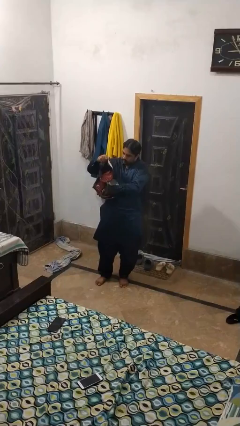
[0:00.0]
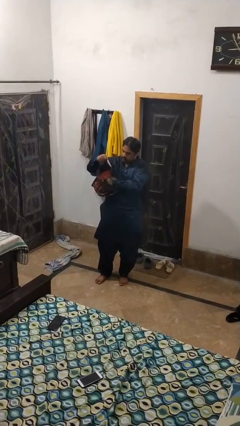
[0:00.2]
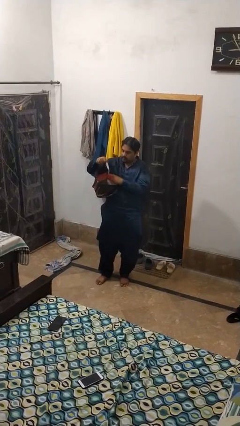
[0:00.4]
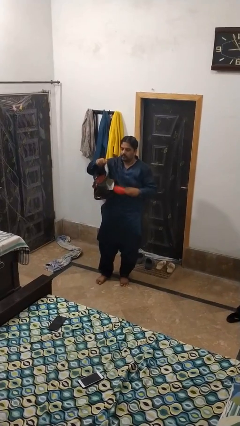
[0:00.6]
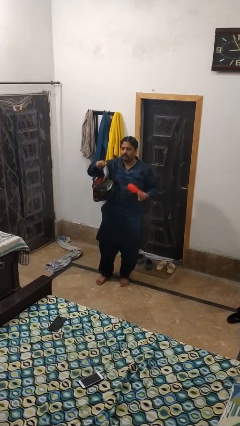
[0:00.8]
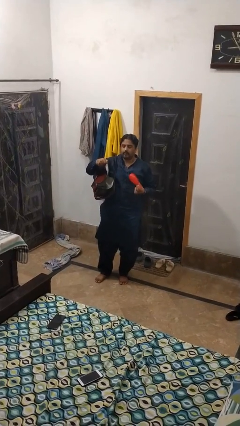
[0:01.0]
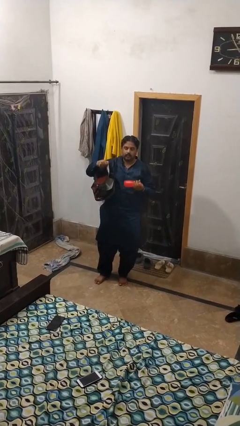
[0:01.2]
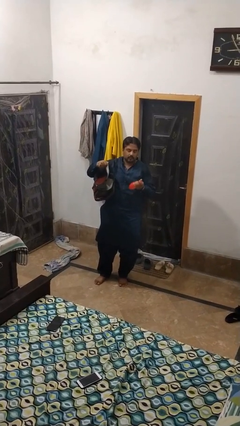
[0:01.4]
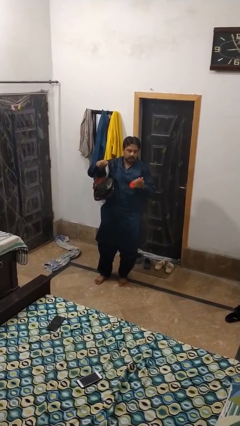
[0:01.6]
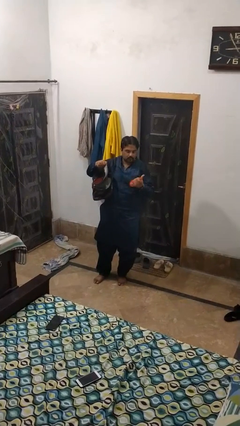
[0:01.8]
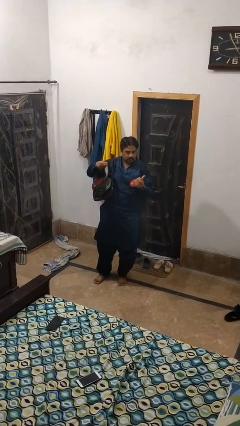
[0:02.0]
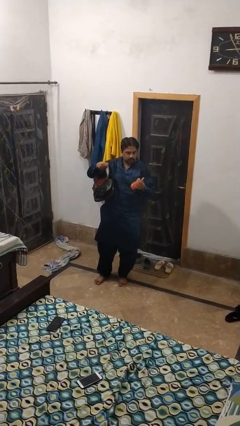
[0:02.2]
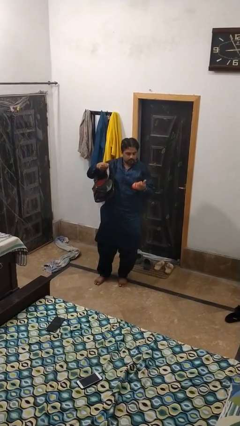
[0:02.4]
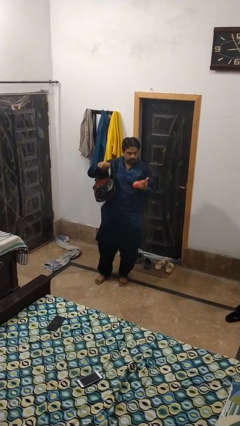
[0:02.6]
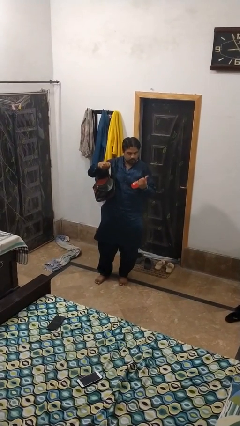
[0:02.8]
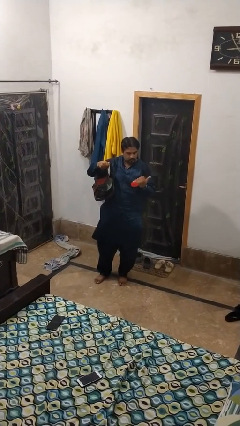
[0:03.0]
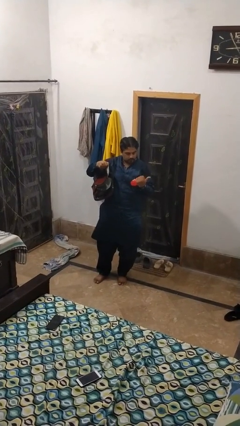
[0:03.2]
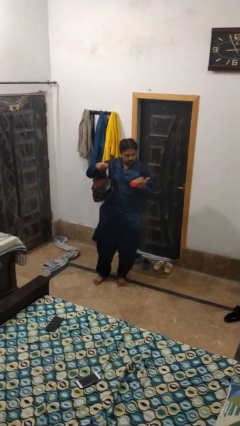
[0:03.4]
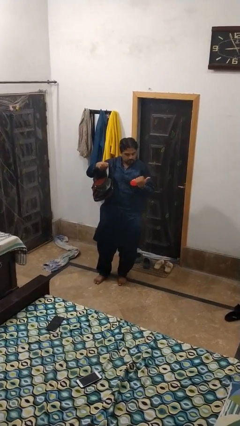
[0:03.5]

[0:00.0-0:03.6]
person takes object from purse

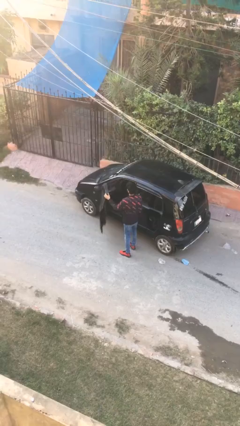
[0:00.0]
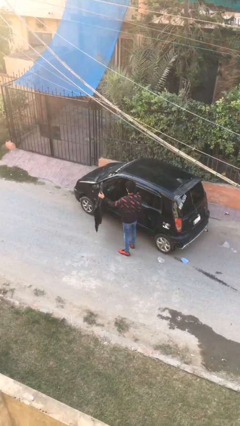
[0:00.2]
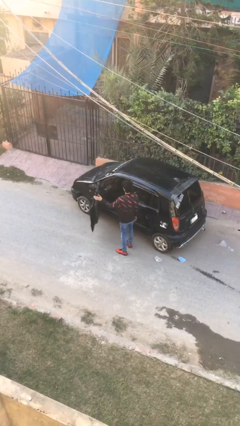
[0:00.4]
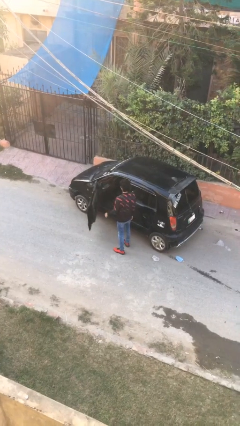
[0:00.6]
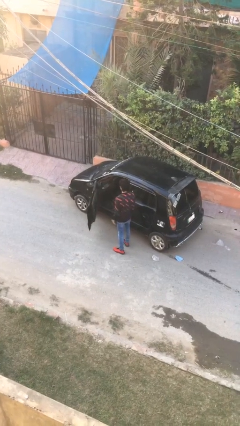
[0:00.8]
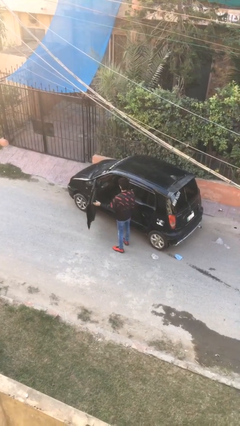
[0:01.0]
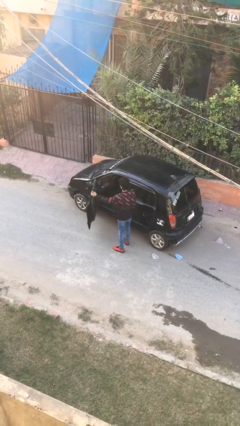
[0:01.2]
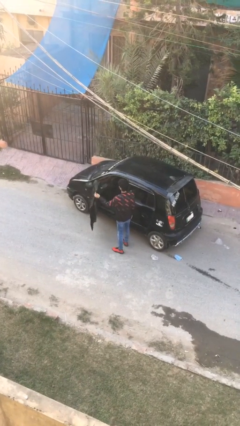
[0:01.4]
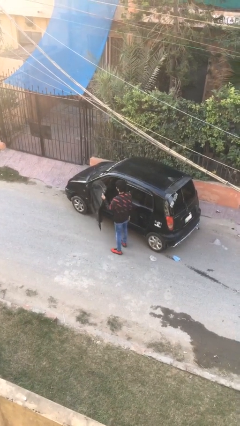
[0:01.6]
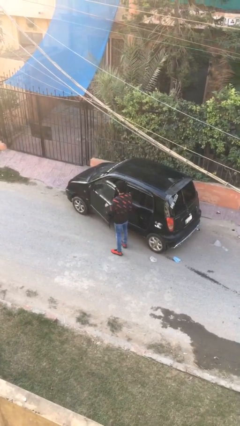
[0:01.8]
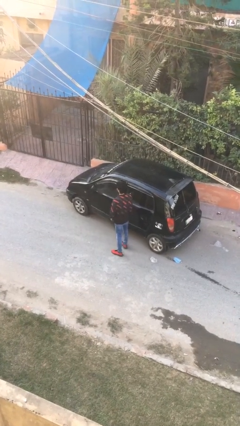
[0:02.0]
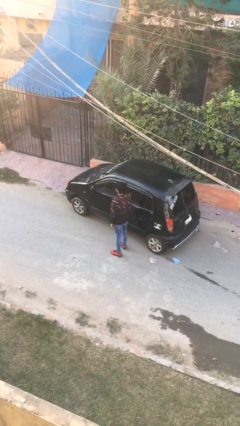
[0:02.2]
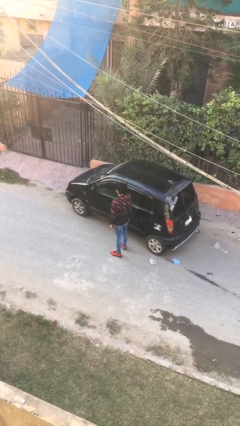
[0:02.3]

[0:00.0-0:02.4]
person closes car door

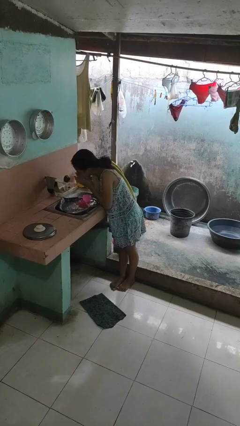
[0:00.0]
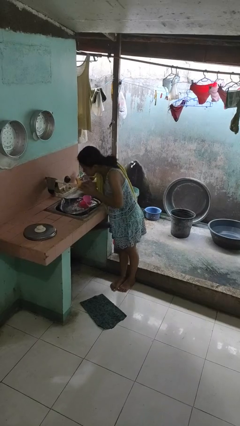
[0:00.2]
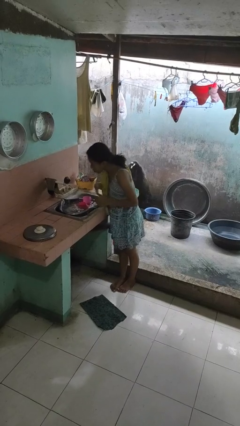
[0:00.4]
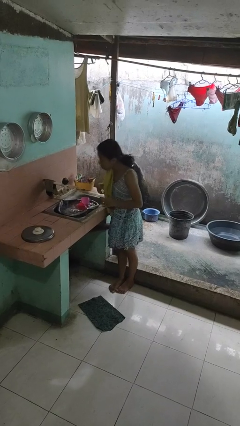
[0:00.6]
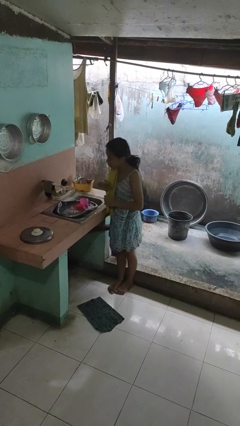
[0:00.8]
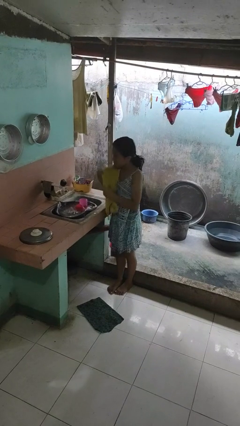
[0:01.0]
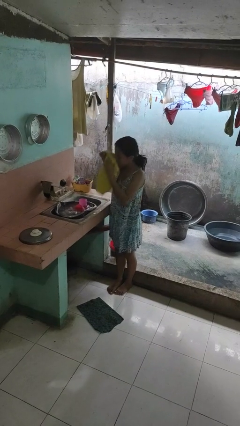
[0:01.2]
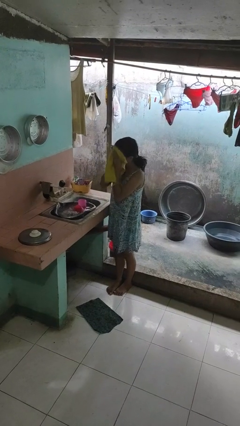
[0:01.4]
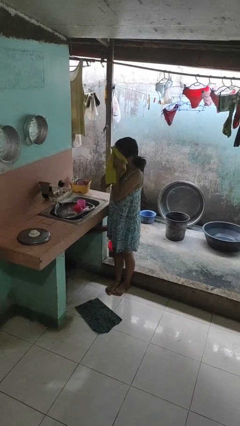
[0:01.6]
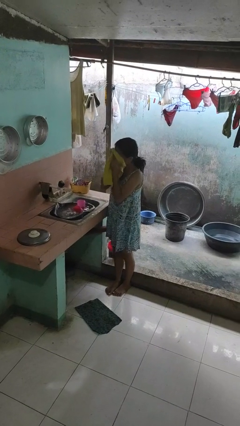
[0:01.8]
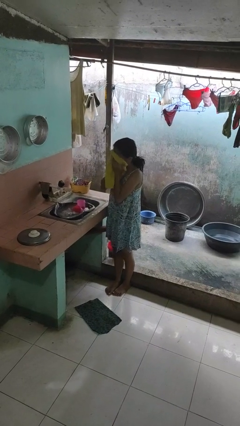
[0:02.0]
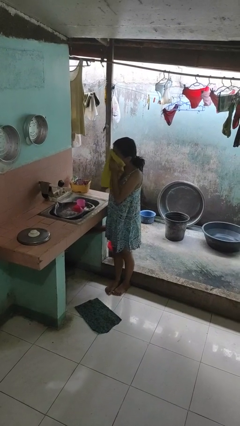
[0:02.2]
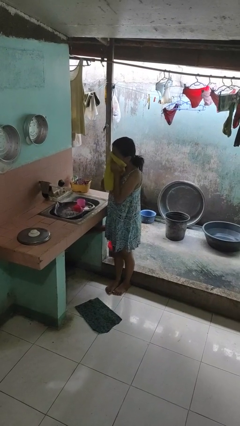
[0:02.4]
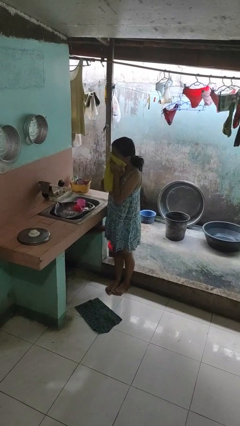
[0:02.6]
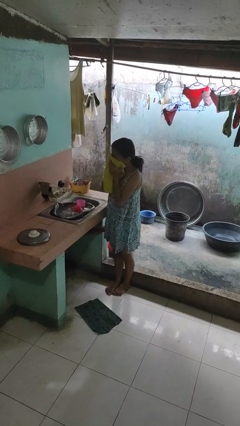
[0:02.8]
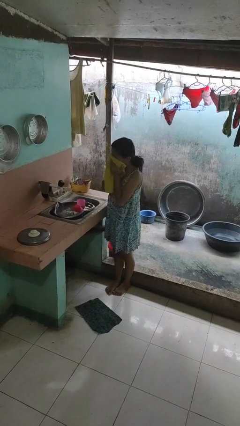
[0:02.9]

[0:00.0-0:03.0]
person dries face with towel

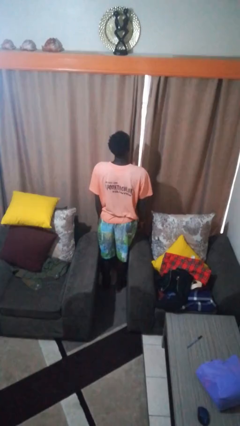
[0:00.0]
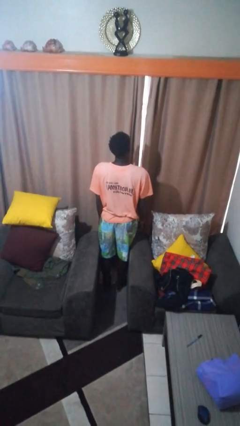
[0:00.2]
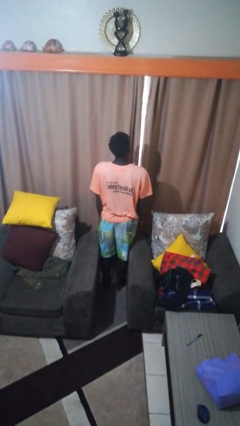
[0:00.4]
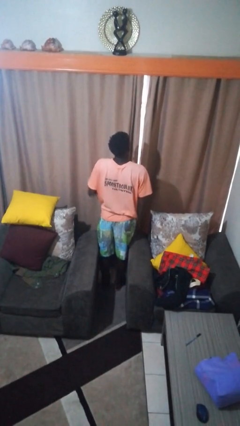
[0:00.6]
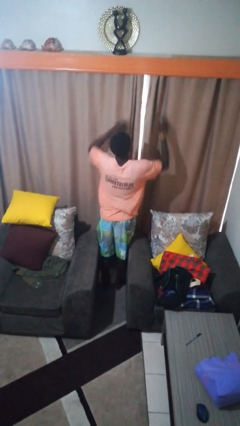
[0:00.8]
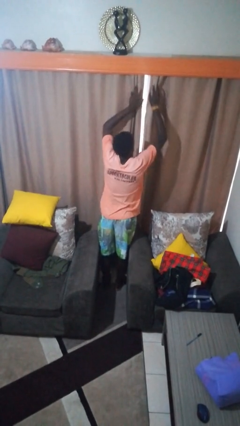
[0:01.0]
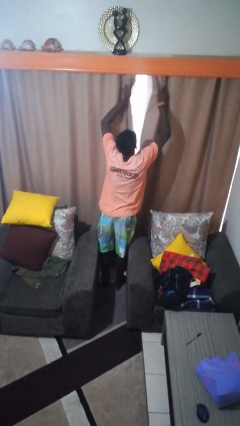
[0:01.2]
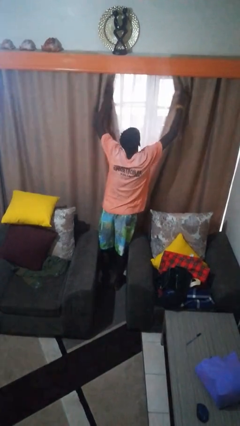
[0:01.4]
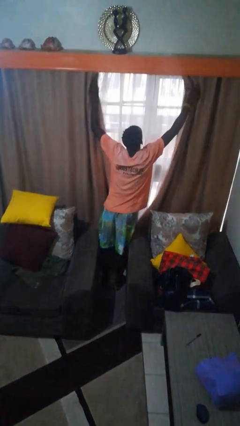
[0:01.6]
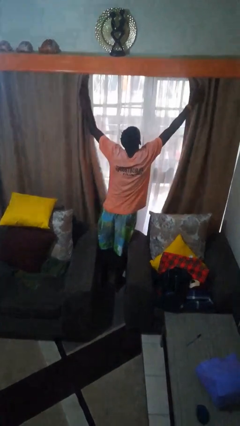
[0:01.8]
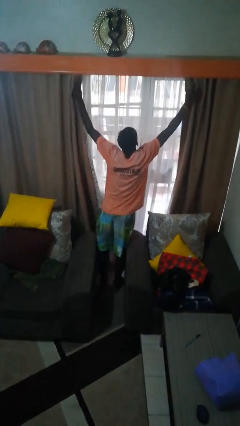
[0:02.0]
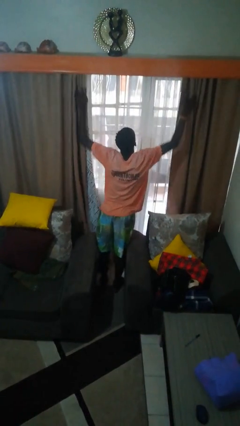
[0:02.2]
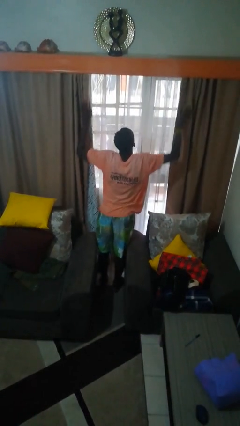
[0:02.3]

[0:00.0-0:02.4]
person opens curtains

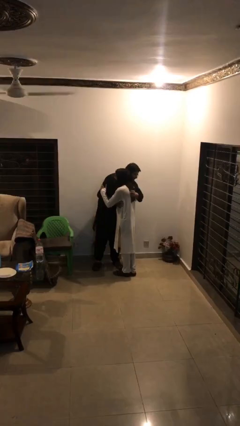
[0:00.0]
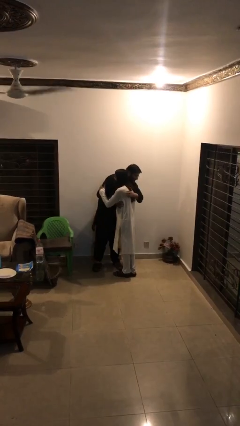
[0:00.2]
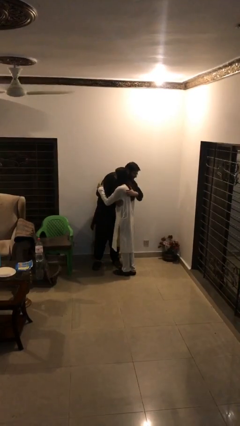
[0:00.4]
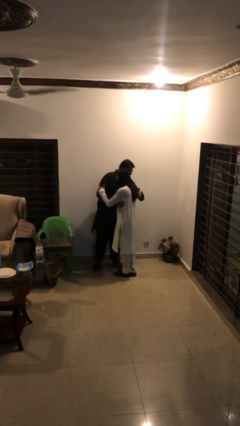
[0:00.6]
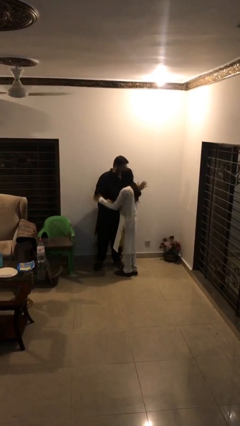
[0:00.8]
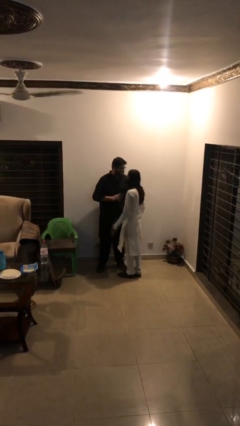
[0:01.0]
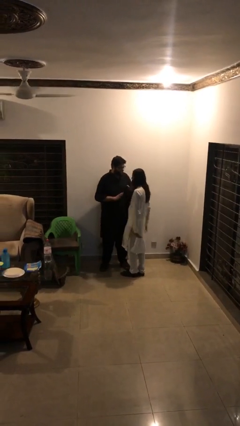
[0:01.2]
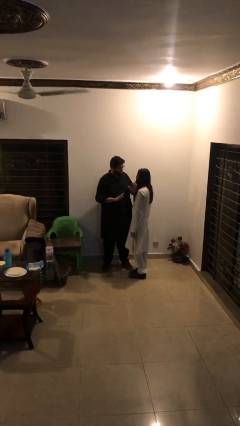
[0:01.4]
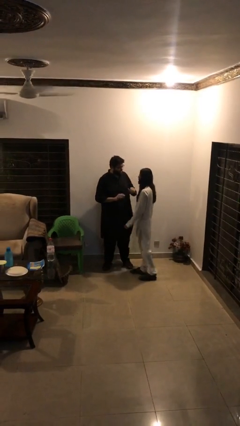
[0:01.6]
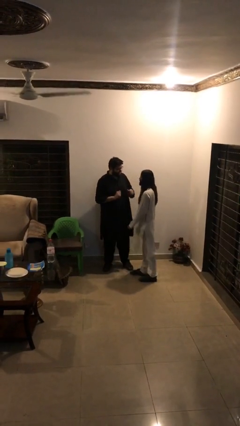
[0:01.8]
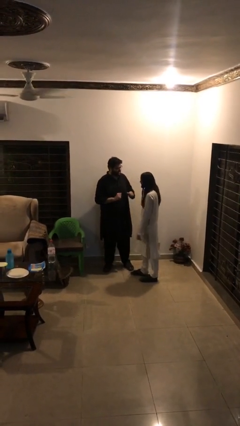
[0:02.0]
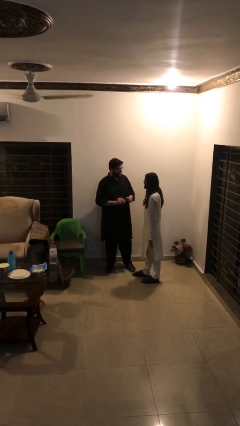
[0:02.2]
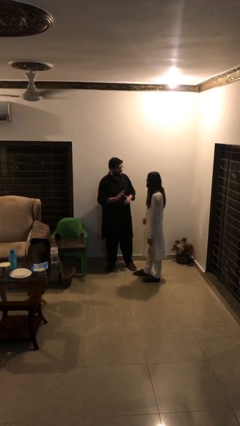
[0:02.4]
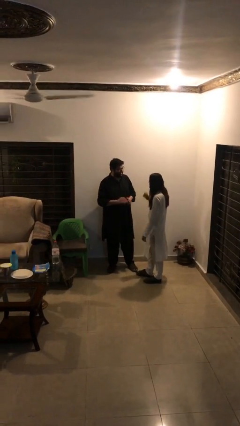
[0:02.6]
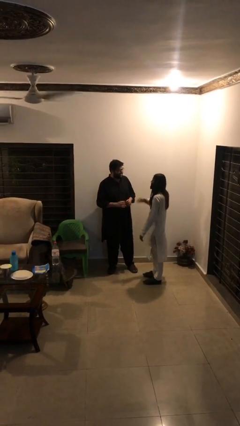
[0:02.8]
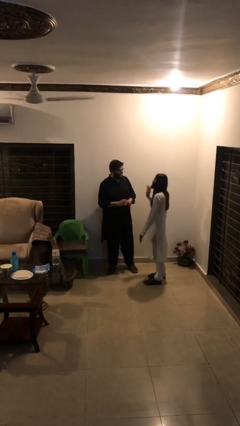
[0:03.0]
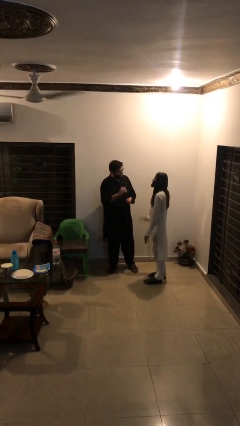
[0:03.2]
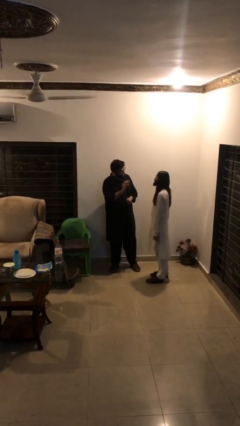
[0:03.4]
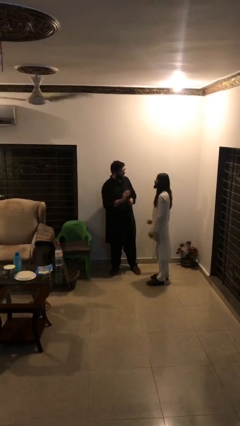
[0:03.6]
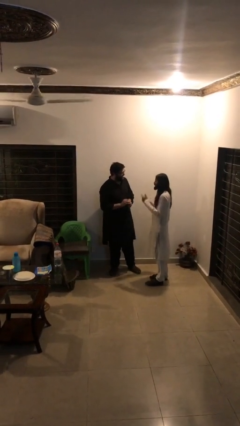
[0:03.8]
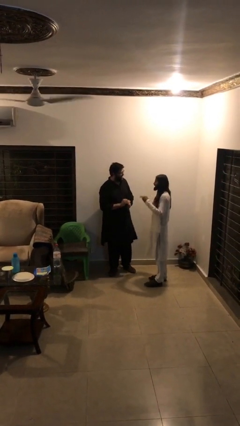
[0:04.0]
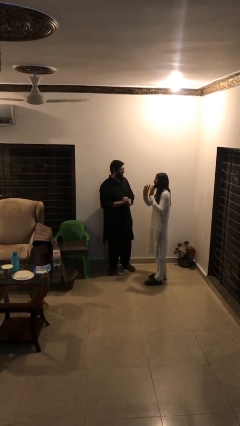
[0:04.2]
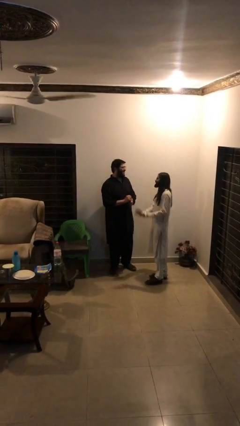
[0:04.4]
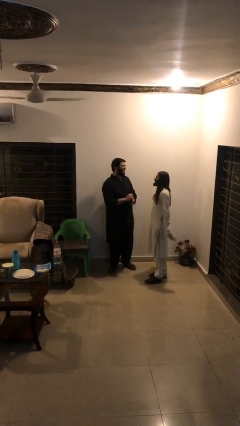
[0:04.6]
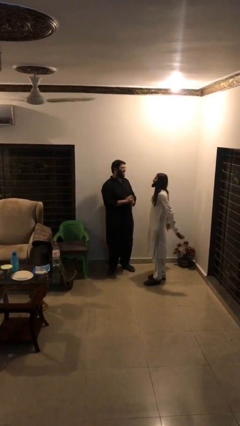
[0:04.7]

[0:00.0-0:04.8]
person talks to person

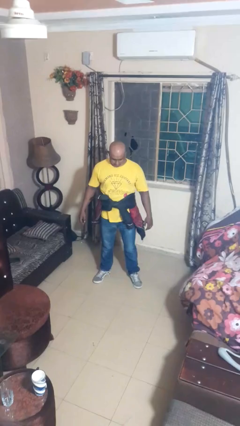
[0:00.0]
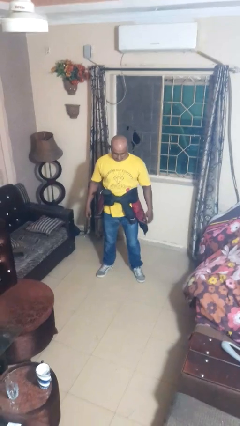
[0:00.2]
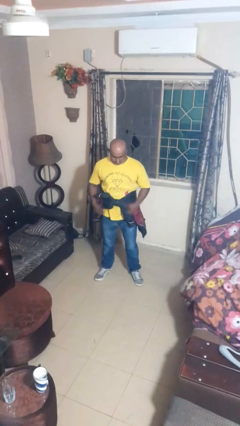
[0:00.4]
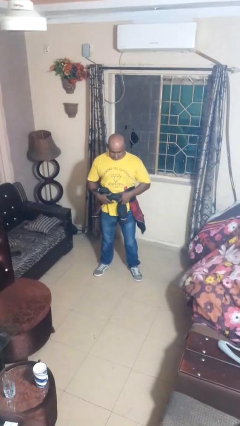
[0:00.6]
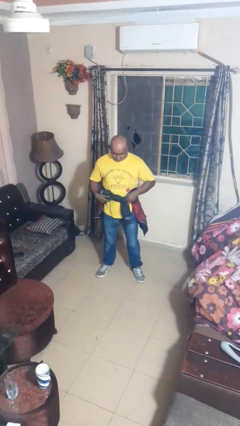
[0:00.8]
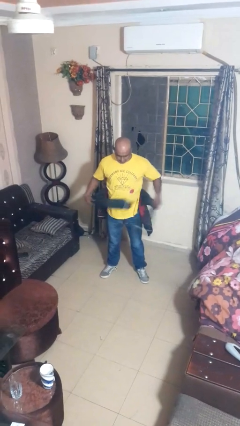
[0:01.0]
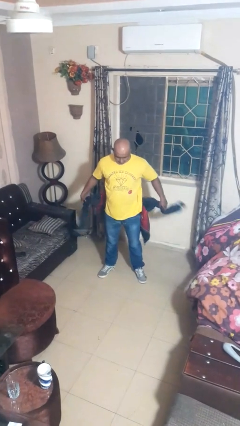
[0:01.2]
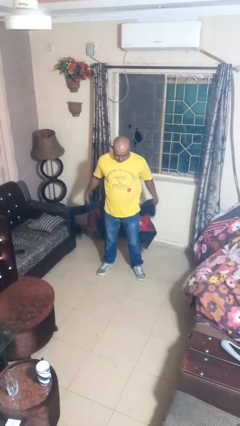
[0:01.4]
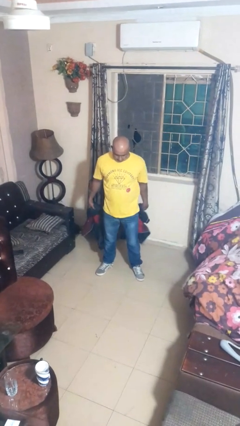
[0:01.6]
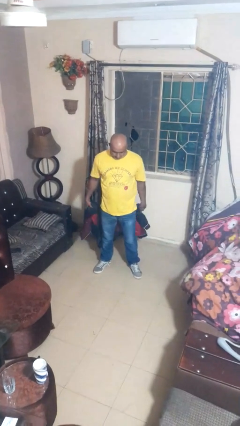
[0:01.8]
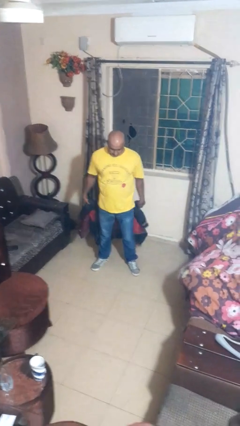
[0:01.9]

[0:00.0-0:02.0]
person unties jacket around waist
